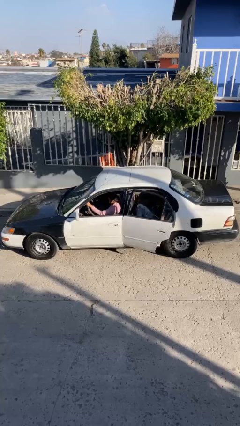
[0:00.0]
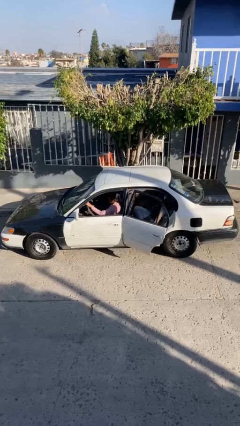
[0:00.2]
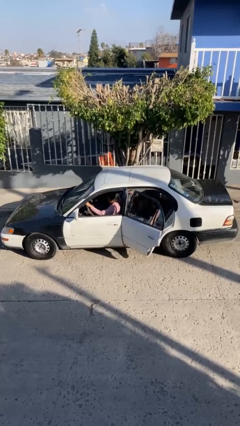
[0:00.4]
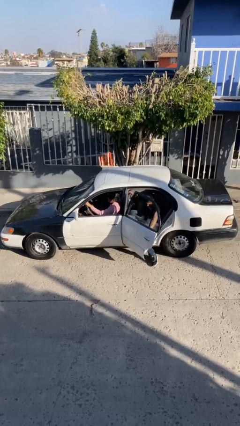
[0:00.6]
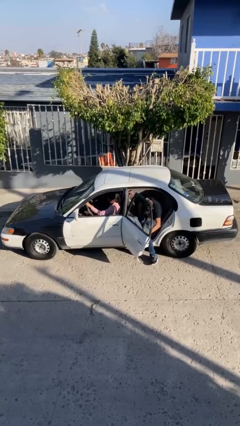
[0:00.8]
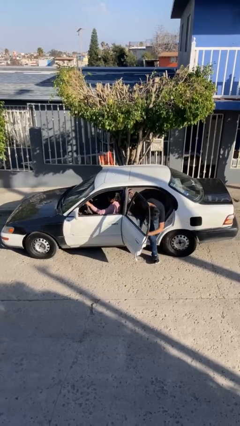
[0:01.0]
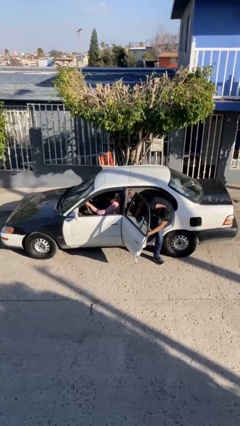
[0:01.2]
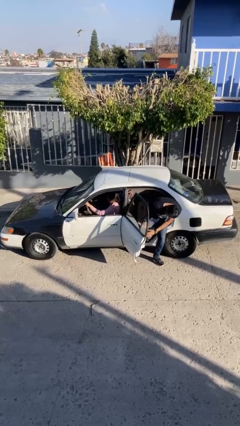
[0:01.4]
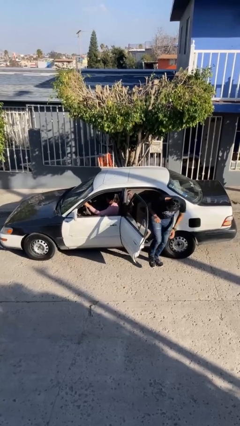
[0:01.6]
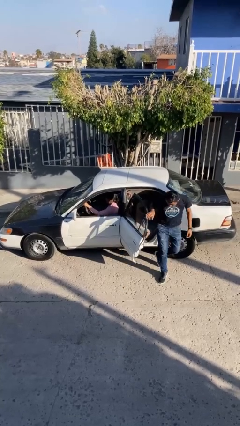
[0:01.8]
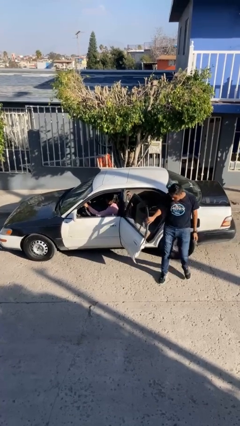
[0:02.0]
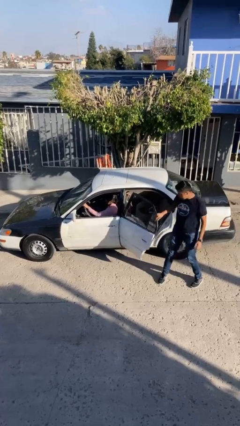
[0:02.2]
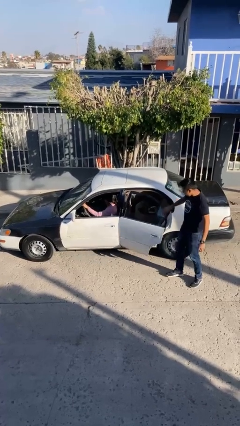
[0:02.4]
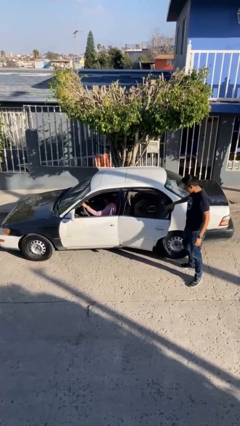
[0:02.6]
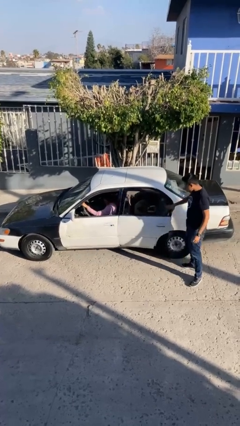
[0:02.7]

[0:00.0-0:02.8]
car drops off person

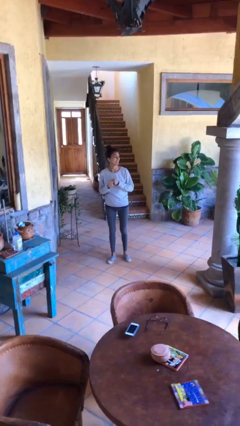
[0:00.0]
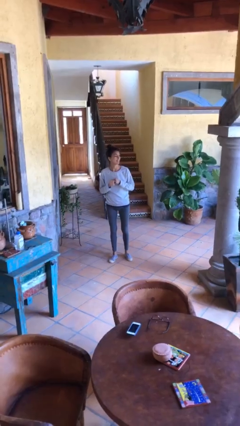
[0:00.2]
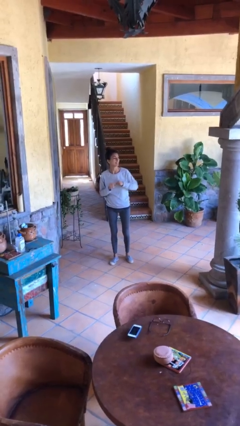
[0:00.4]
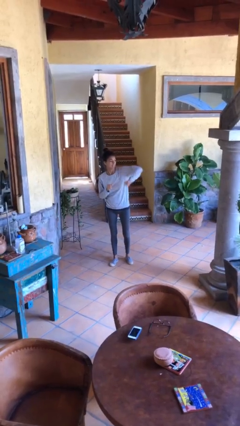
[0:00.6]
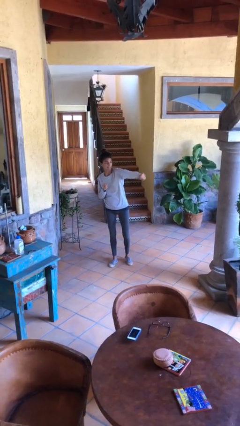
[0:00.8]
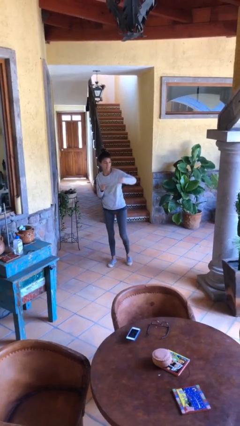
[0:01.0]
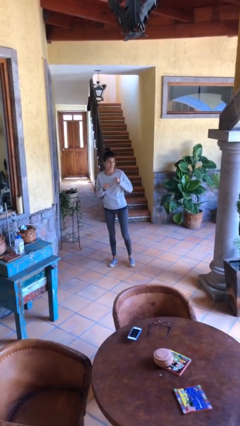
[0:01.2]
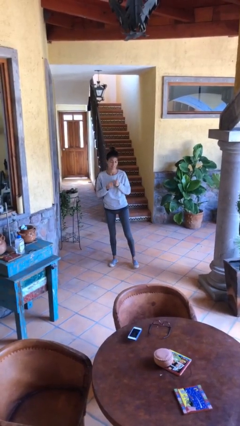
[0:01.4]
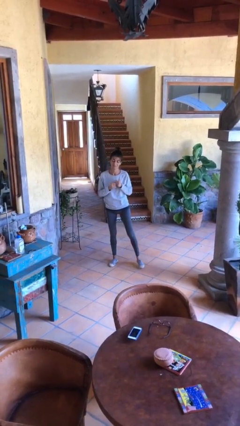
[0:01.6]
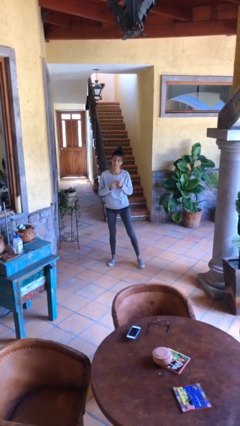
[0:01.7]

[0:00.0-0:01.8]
person karate chop

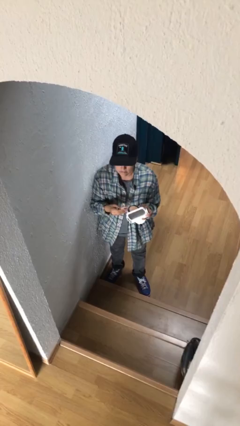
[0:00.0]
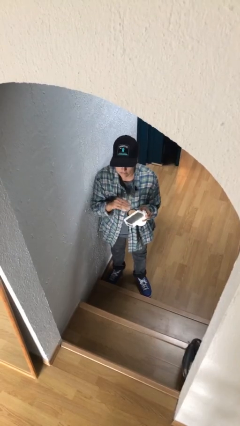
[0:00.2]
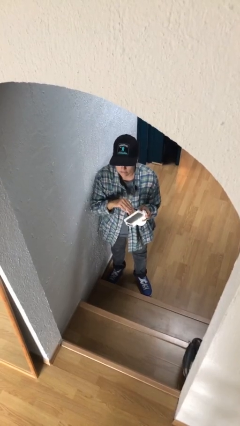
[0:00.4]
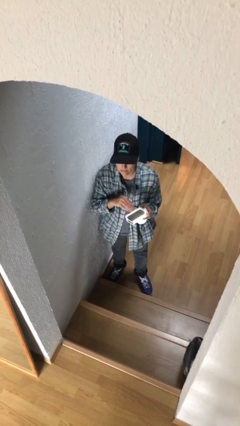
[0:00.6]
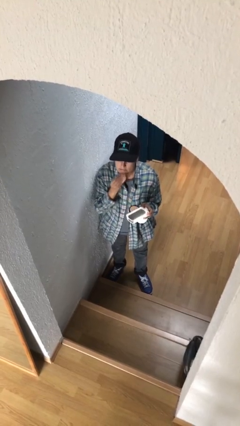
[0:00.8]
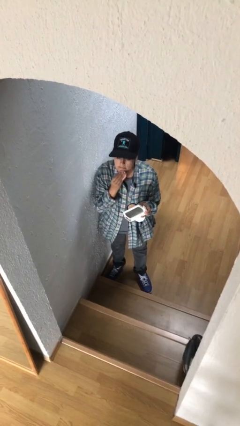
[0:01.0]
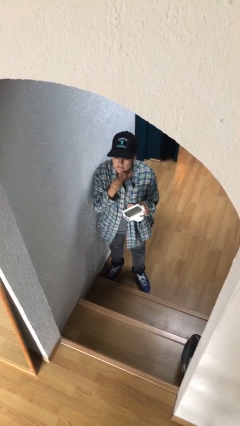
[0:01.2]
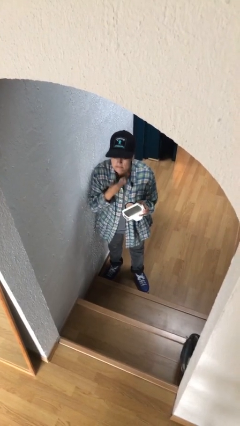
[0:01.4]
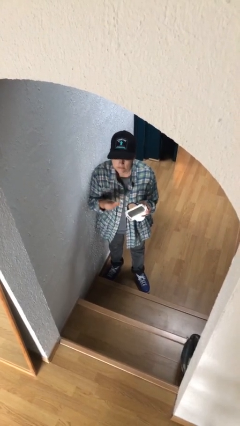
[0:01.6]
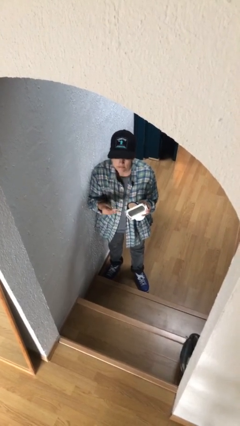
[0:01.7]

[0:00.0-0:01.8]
person applies foundation makeup

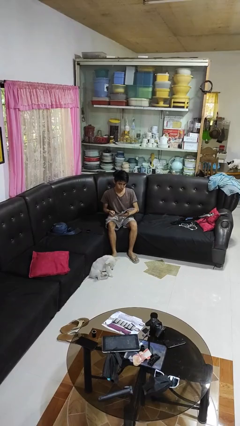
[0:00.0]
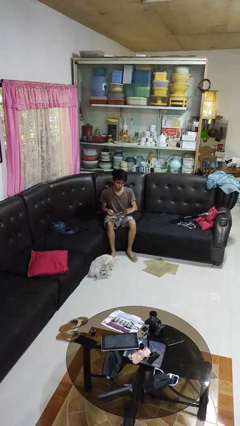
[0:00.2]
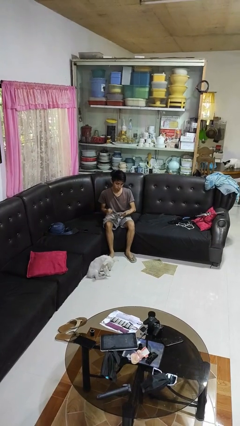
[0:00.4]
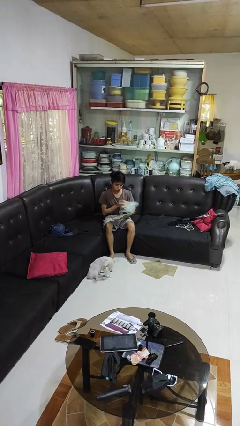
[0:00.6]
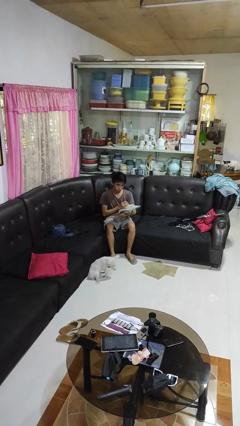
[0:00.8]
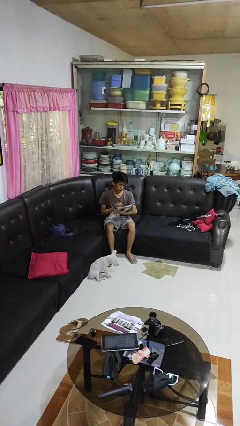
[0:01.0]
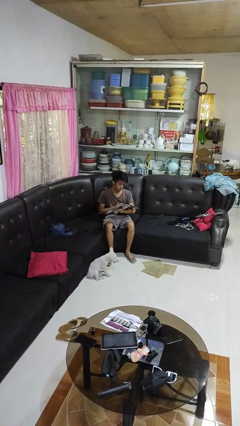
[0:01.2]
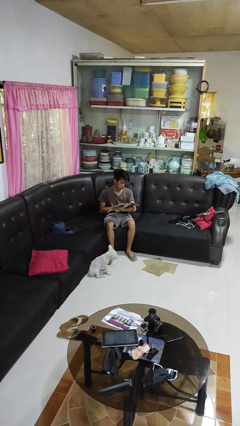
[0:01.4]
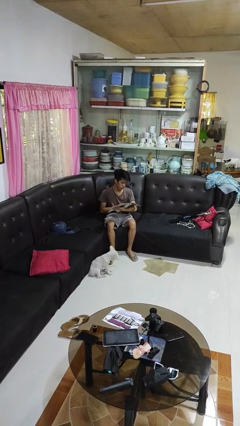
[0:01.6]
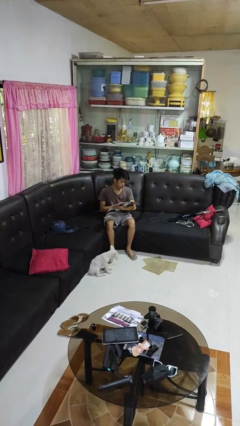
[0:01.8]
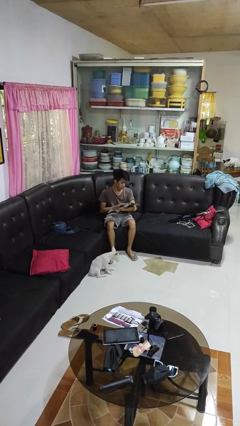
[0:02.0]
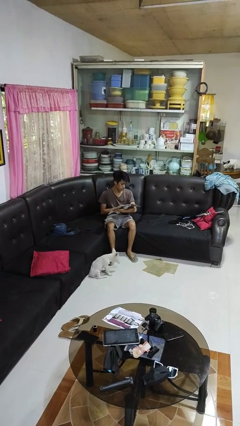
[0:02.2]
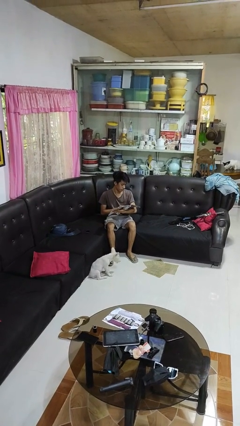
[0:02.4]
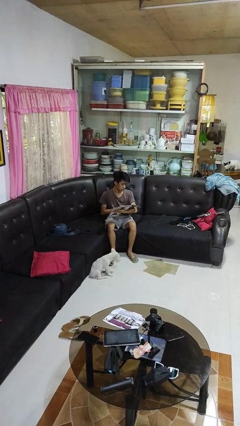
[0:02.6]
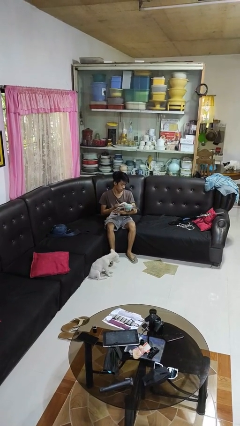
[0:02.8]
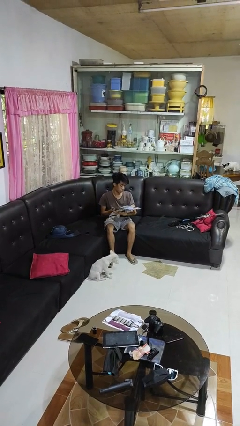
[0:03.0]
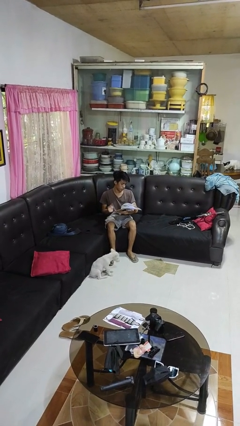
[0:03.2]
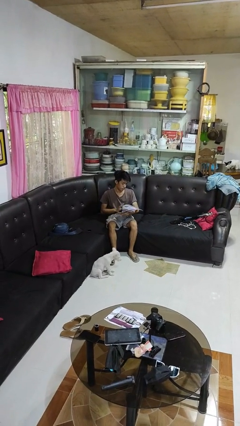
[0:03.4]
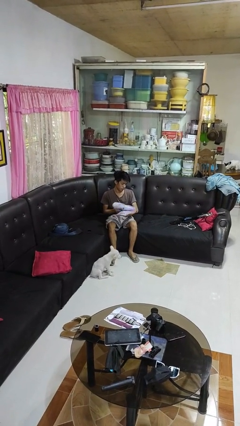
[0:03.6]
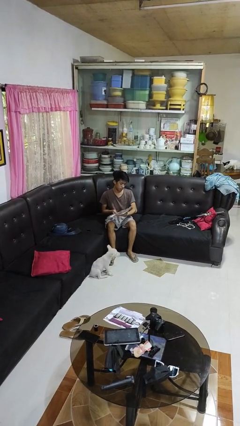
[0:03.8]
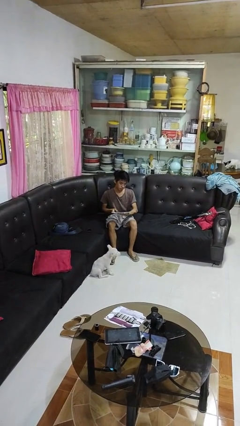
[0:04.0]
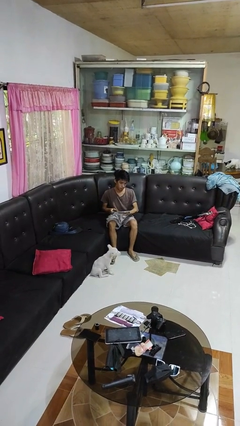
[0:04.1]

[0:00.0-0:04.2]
person reads magazine

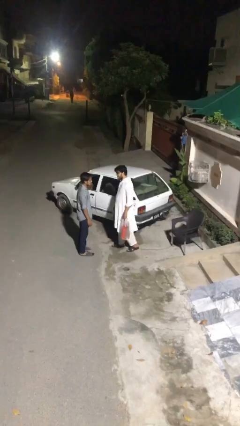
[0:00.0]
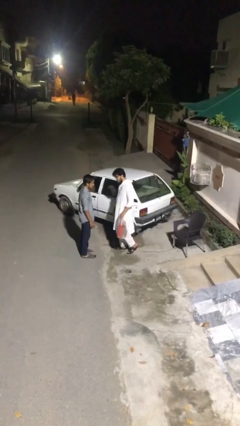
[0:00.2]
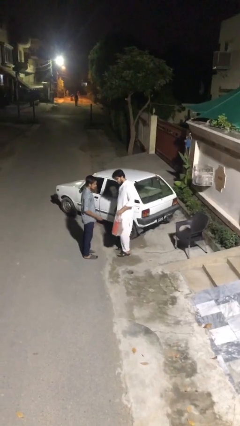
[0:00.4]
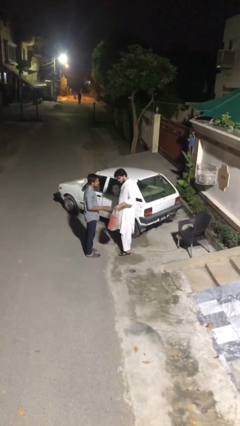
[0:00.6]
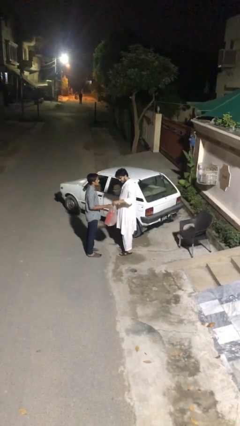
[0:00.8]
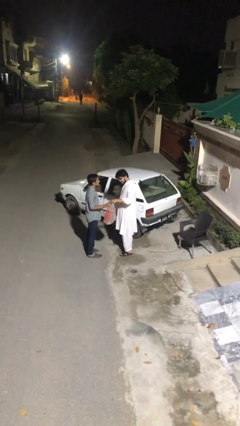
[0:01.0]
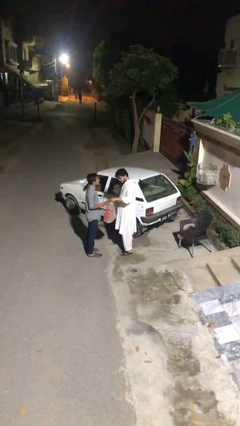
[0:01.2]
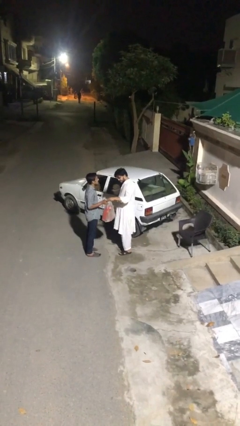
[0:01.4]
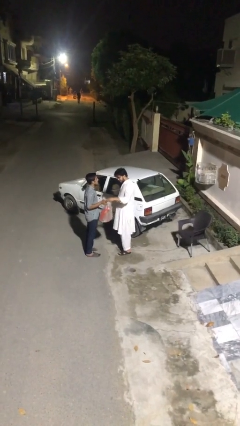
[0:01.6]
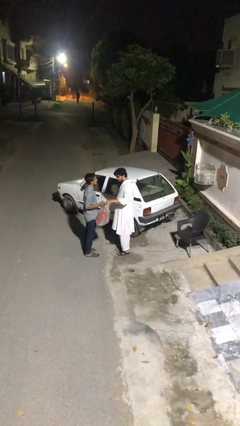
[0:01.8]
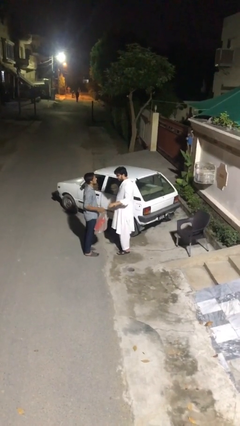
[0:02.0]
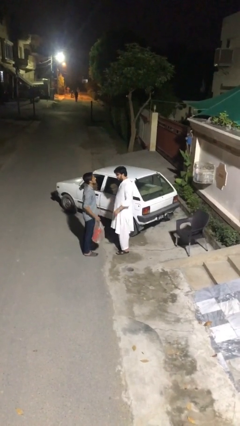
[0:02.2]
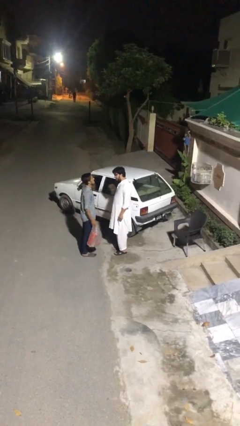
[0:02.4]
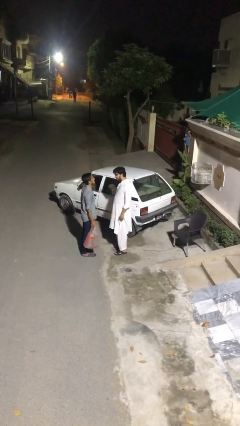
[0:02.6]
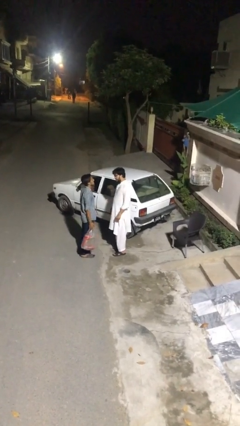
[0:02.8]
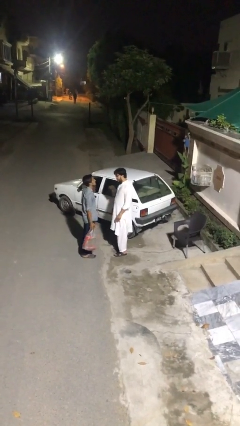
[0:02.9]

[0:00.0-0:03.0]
person transfers object to person

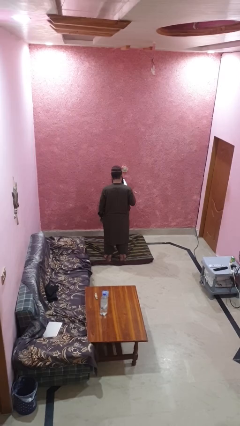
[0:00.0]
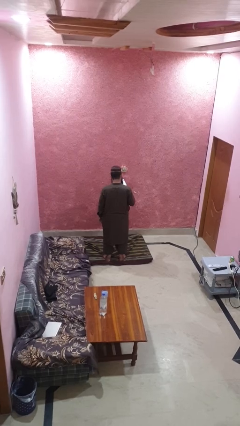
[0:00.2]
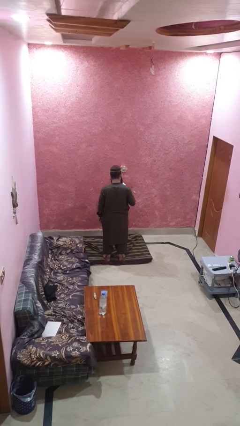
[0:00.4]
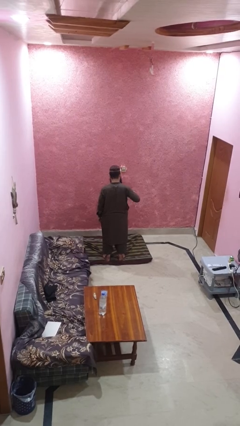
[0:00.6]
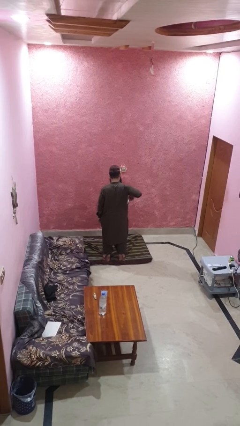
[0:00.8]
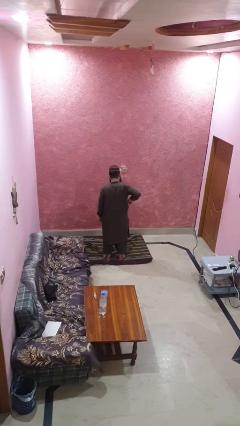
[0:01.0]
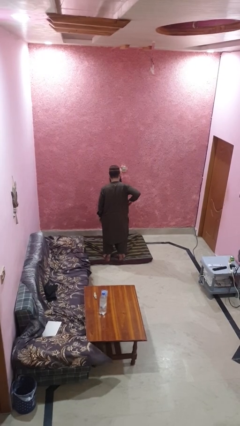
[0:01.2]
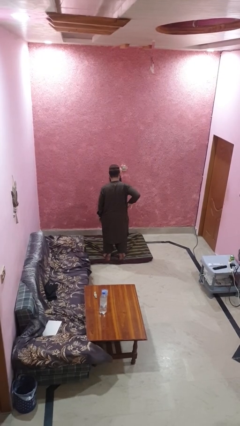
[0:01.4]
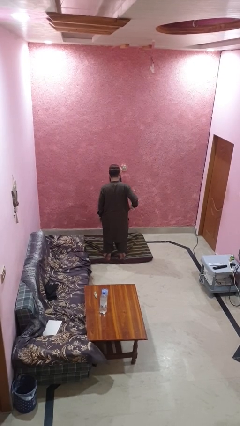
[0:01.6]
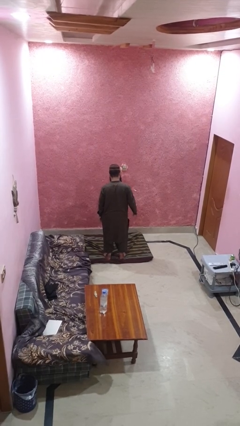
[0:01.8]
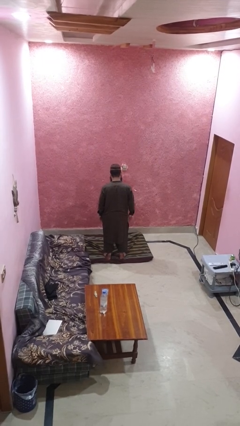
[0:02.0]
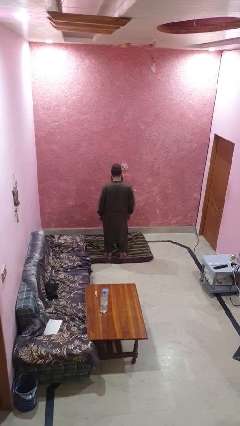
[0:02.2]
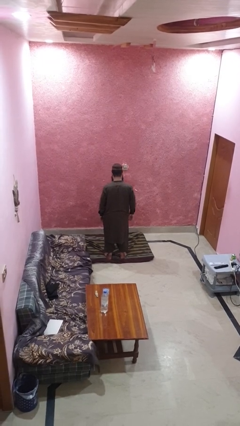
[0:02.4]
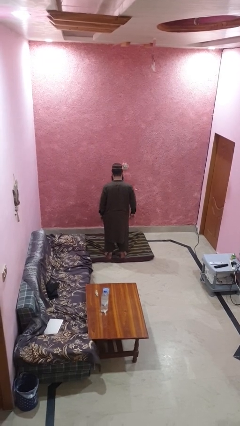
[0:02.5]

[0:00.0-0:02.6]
person puts phone into pocket

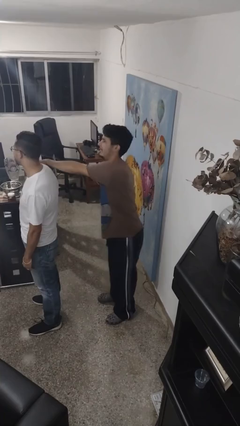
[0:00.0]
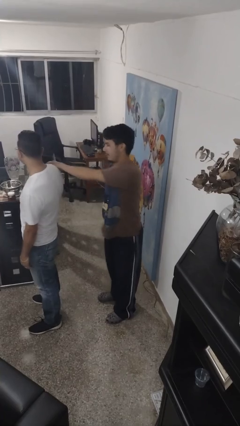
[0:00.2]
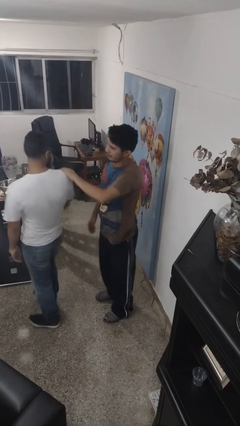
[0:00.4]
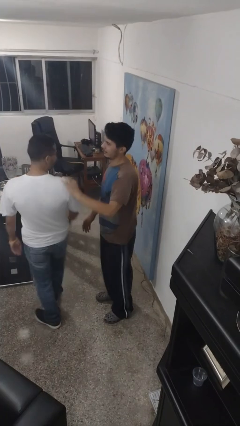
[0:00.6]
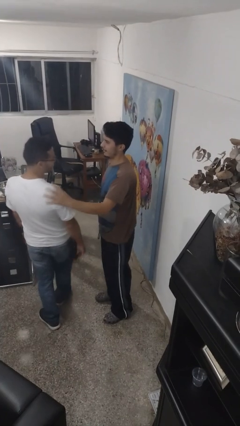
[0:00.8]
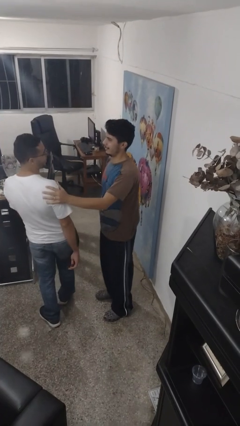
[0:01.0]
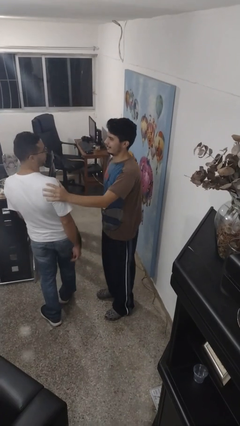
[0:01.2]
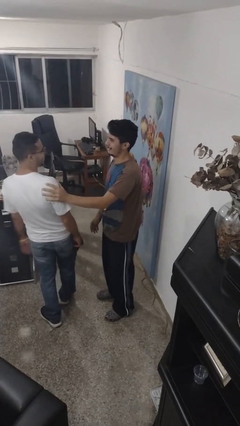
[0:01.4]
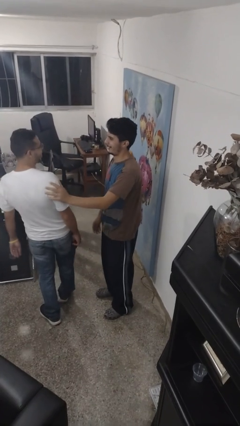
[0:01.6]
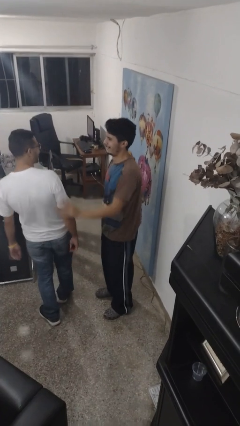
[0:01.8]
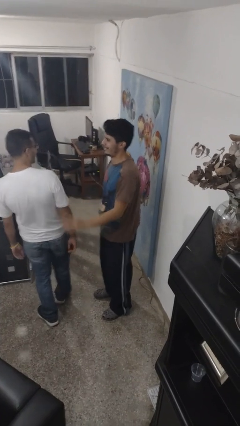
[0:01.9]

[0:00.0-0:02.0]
person spins person around
